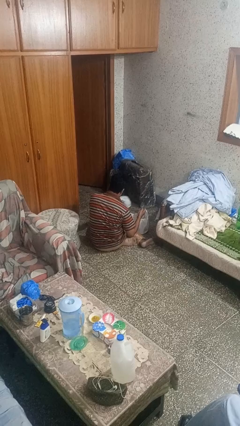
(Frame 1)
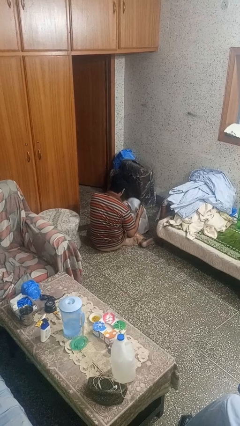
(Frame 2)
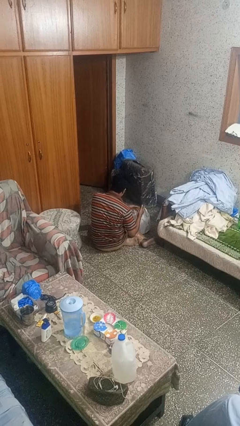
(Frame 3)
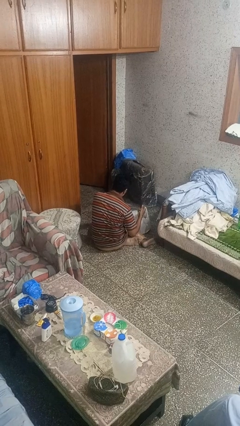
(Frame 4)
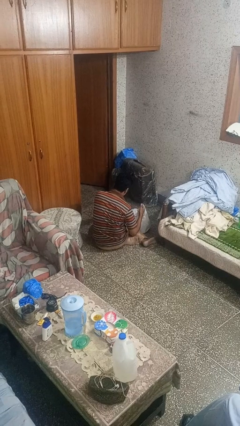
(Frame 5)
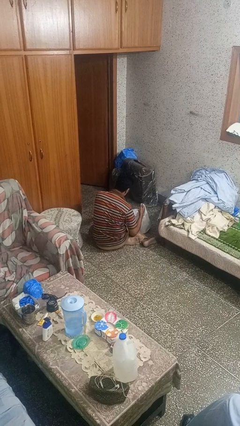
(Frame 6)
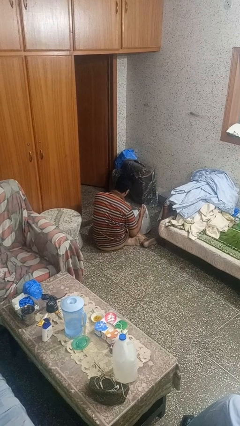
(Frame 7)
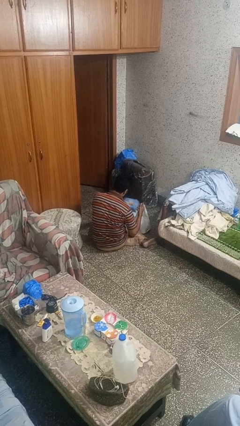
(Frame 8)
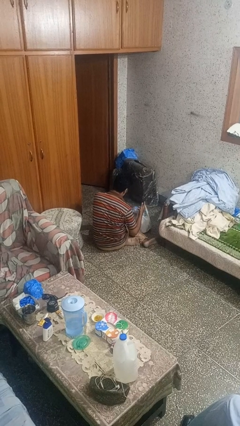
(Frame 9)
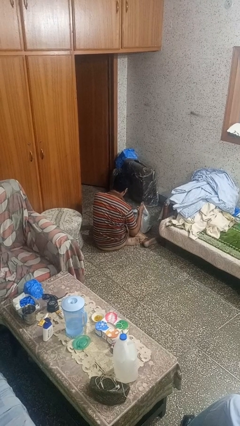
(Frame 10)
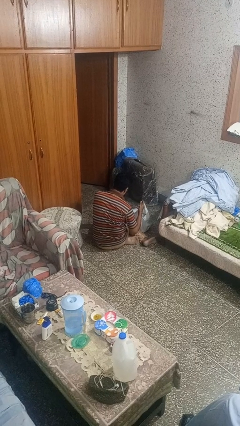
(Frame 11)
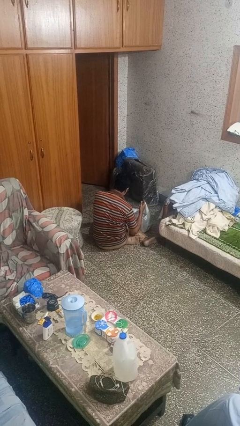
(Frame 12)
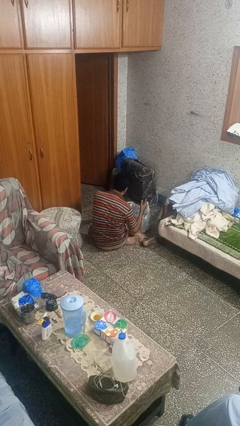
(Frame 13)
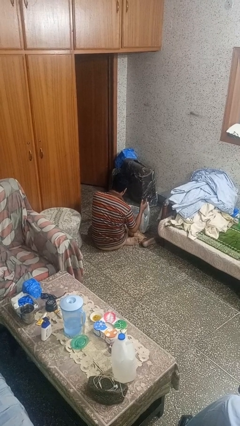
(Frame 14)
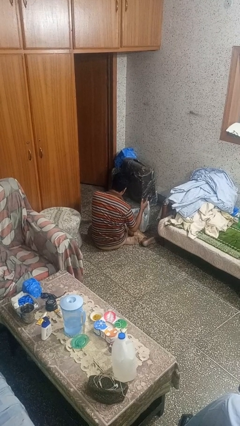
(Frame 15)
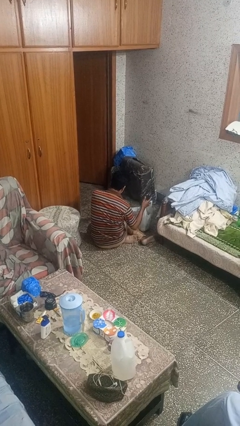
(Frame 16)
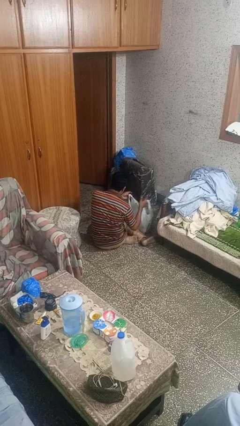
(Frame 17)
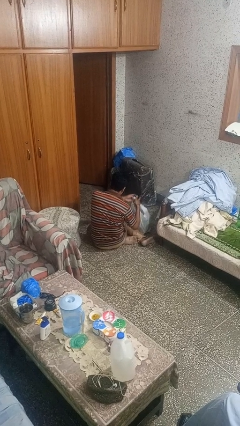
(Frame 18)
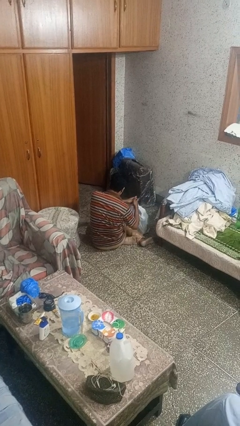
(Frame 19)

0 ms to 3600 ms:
person puts object into bag

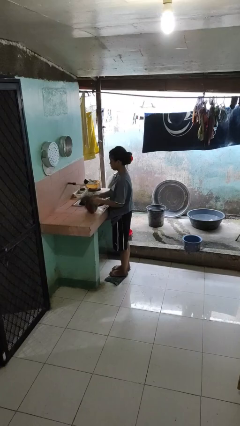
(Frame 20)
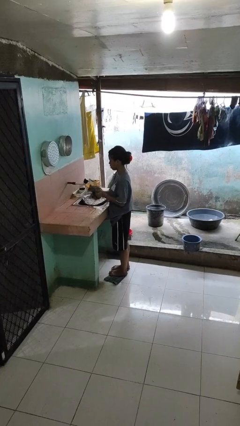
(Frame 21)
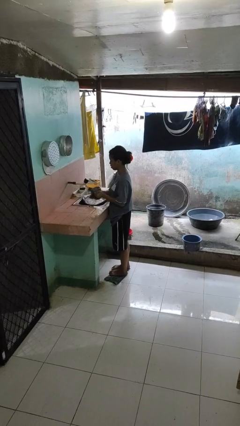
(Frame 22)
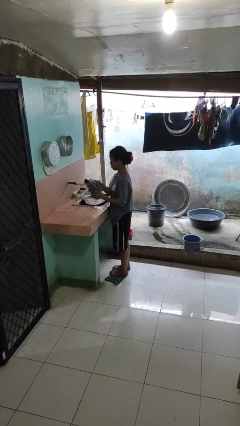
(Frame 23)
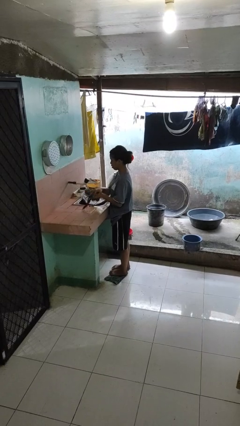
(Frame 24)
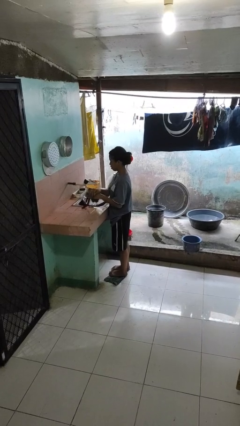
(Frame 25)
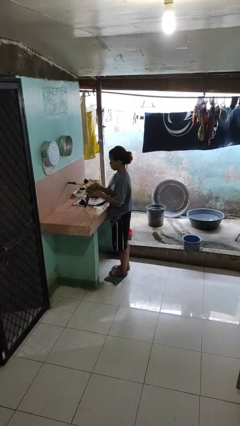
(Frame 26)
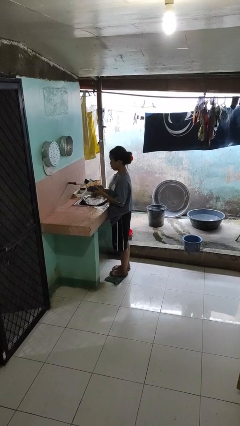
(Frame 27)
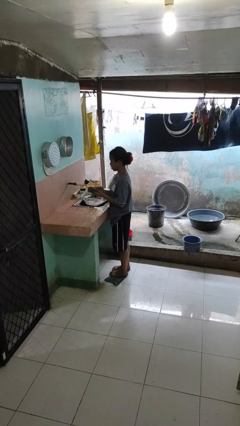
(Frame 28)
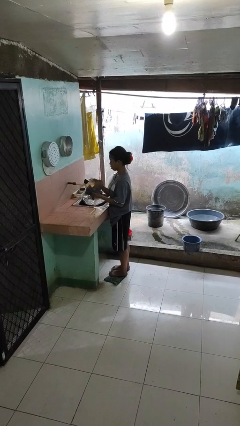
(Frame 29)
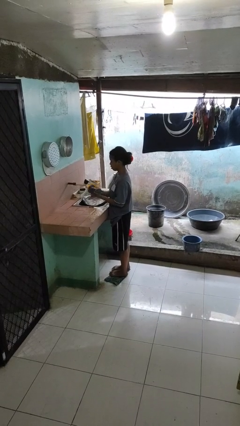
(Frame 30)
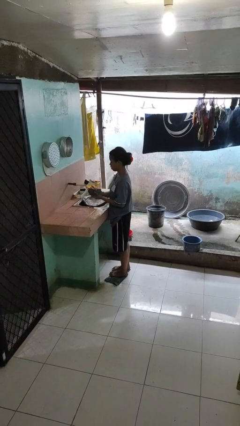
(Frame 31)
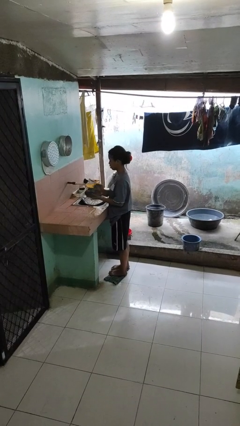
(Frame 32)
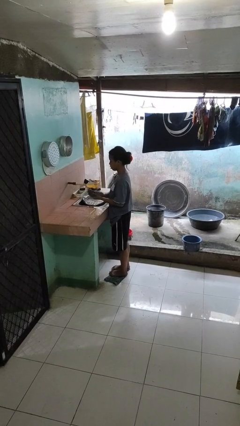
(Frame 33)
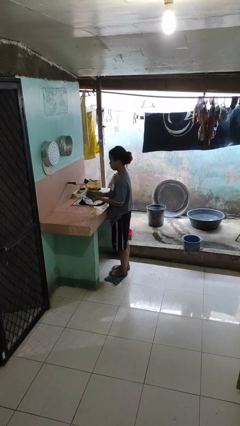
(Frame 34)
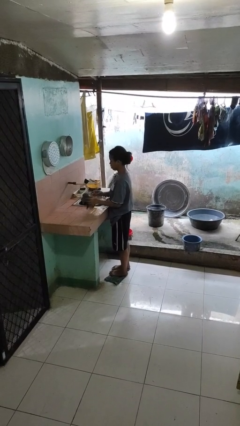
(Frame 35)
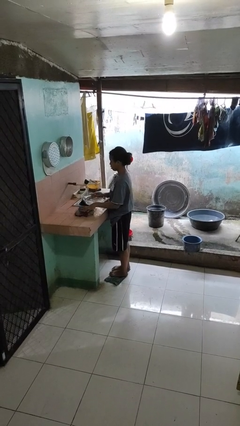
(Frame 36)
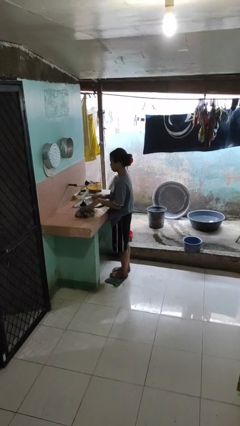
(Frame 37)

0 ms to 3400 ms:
person dries hands with towel

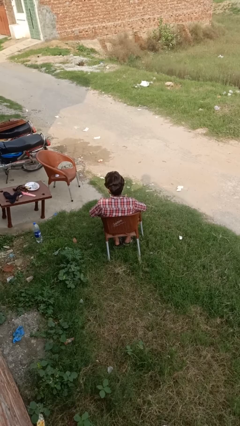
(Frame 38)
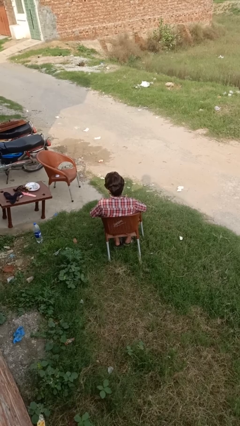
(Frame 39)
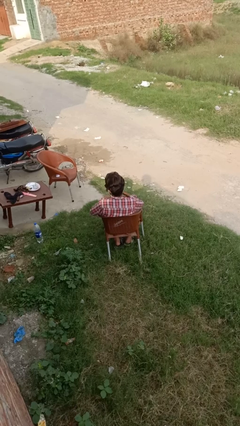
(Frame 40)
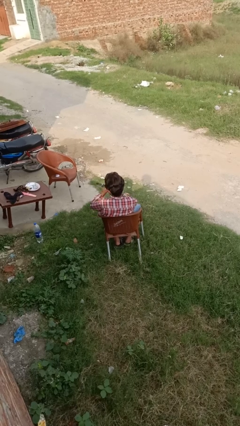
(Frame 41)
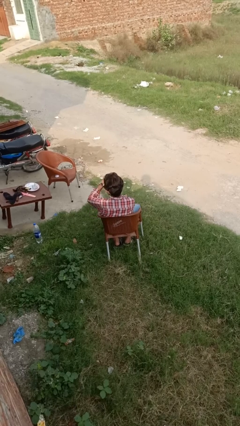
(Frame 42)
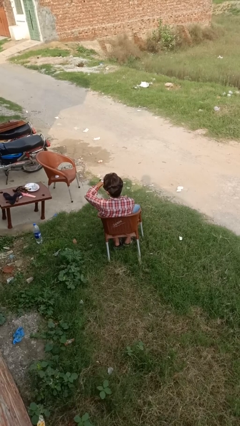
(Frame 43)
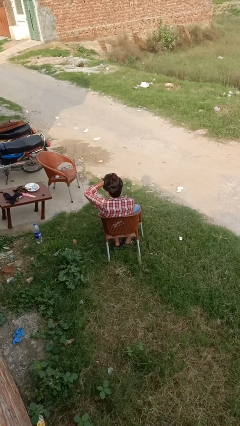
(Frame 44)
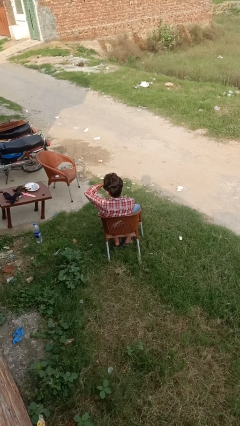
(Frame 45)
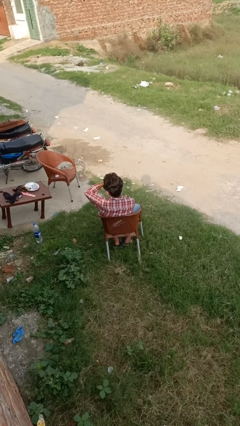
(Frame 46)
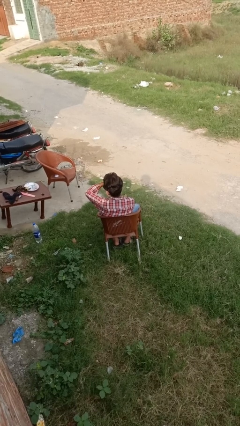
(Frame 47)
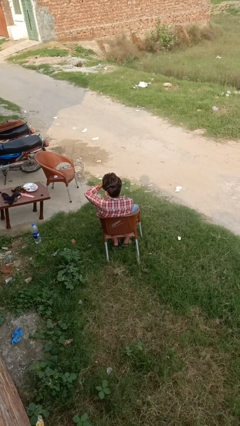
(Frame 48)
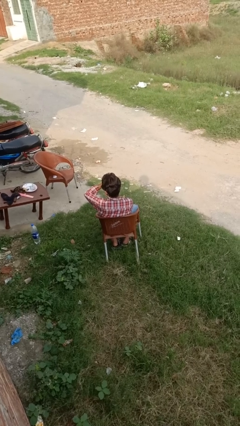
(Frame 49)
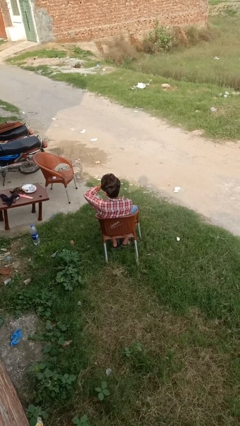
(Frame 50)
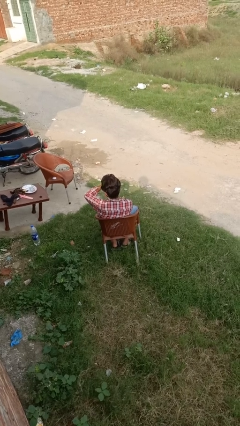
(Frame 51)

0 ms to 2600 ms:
person puts on wristwatch

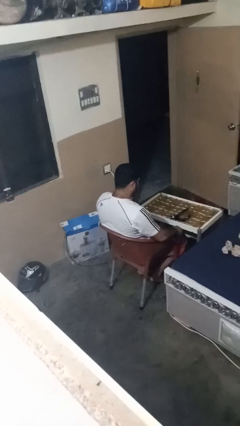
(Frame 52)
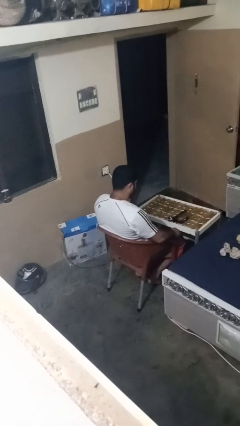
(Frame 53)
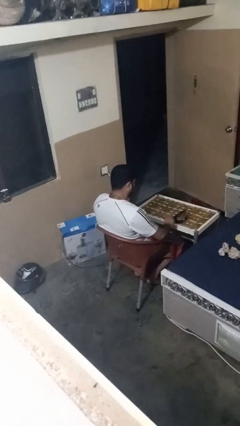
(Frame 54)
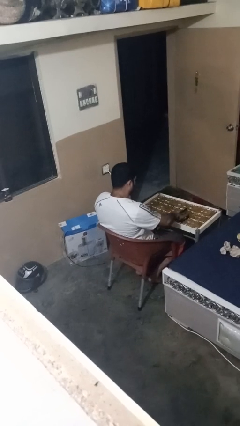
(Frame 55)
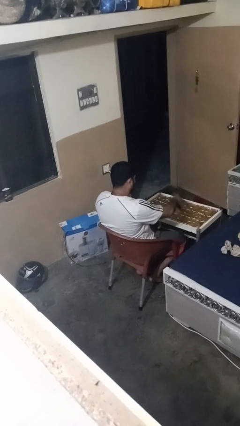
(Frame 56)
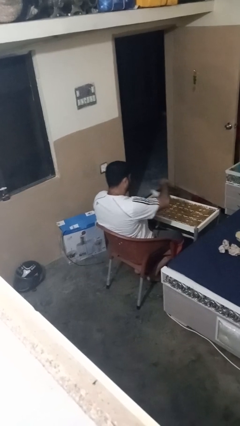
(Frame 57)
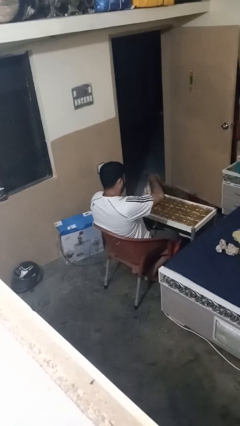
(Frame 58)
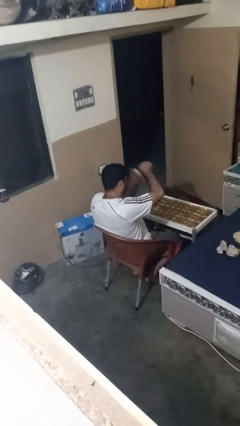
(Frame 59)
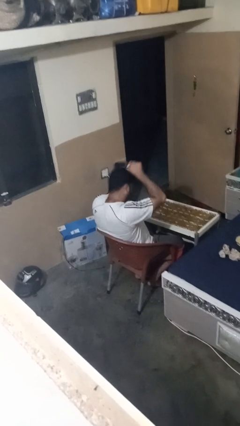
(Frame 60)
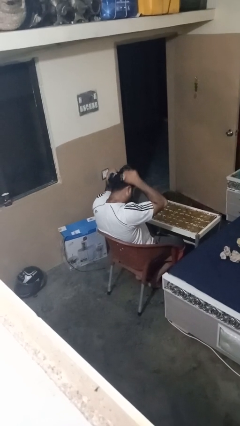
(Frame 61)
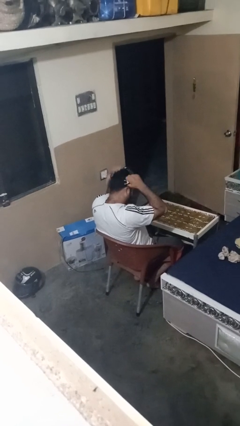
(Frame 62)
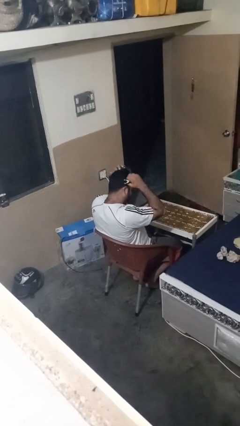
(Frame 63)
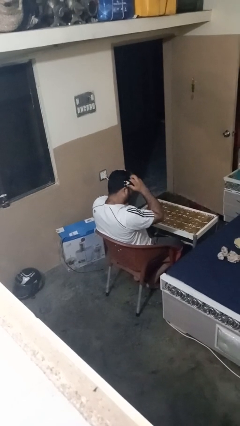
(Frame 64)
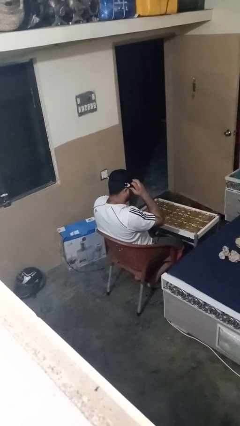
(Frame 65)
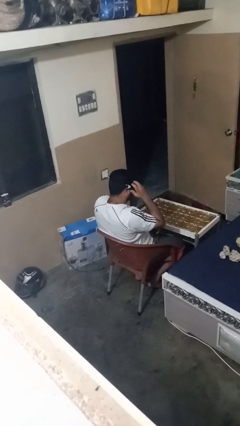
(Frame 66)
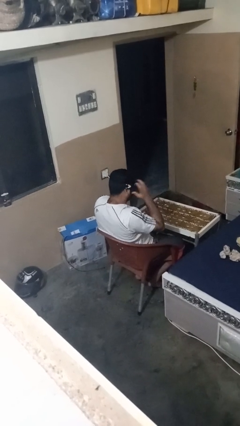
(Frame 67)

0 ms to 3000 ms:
person puts on sunglasses

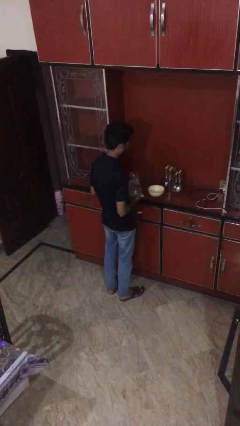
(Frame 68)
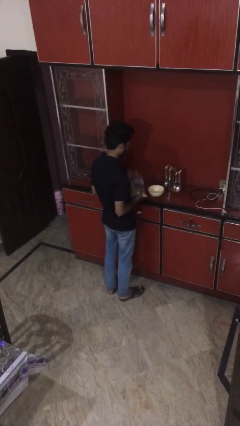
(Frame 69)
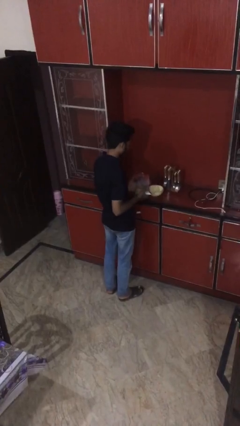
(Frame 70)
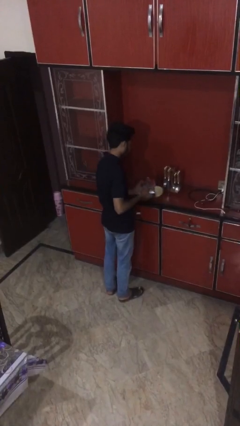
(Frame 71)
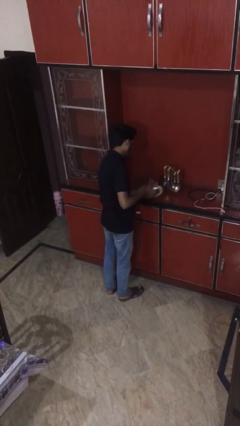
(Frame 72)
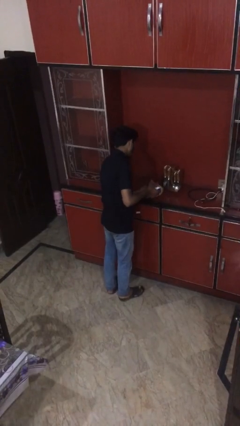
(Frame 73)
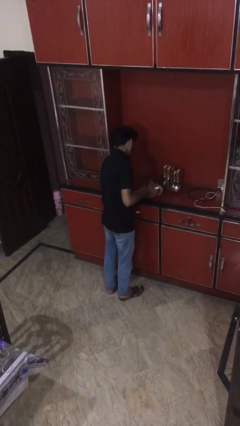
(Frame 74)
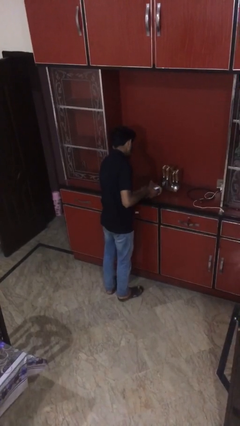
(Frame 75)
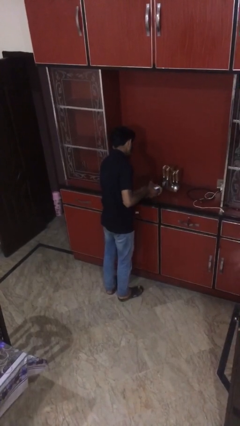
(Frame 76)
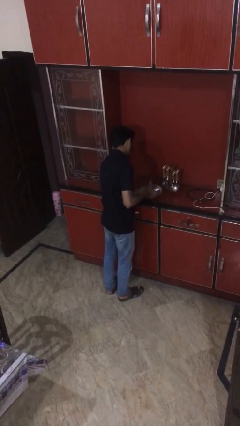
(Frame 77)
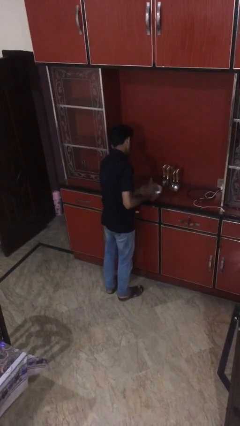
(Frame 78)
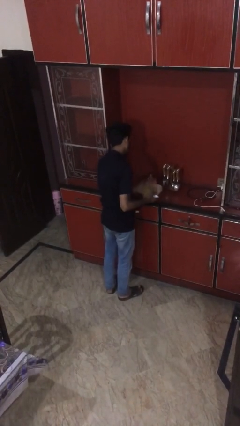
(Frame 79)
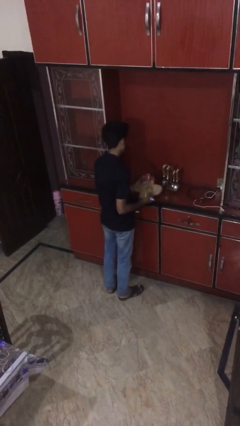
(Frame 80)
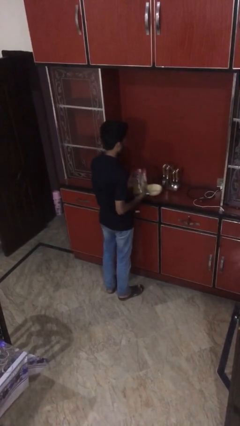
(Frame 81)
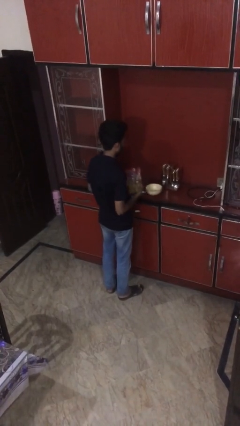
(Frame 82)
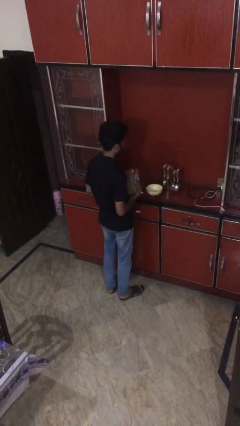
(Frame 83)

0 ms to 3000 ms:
person pours into bowl

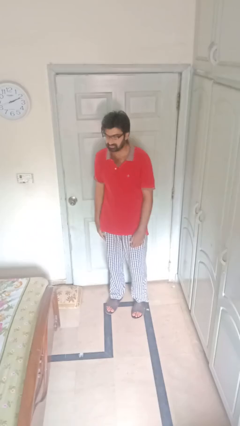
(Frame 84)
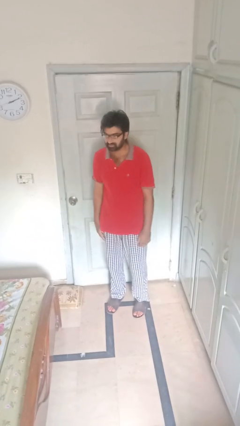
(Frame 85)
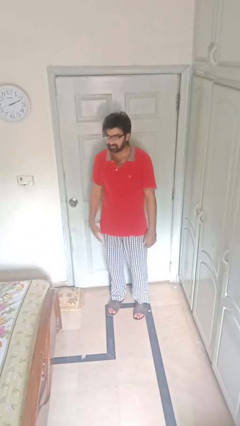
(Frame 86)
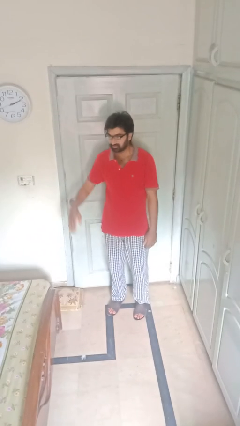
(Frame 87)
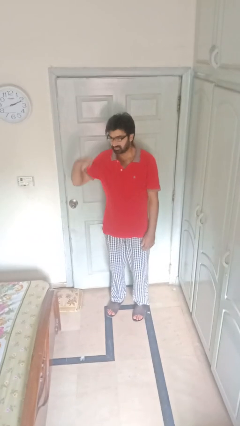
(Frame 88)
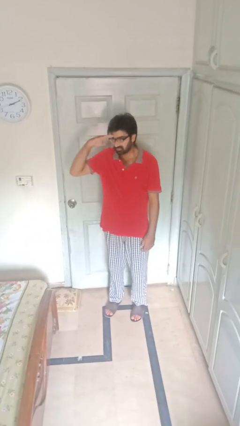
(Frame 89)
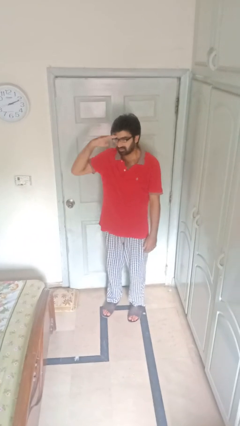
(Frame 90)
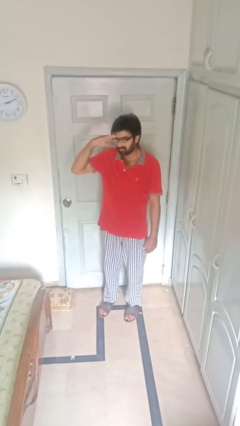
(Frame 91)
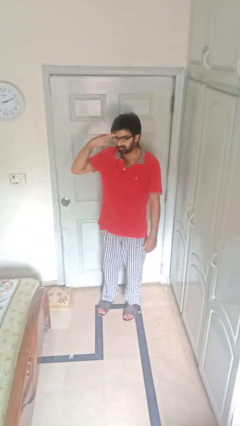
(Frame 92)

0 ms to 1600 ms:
person salutes
